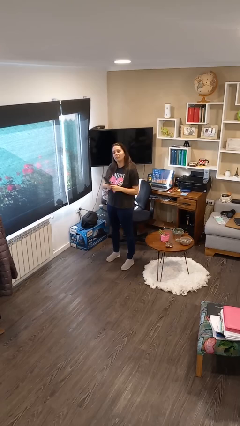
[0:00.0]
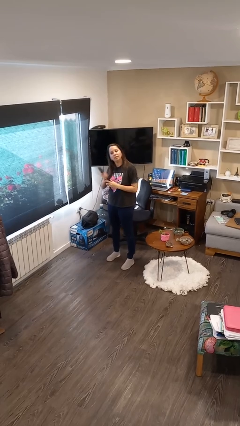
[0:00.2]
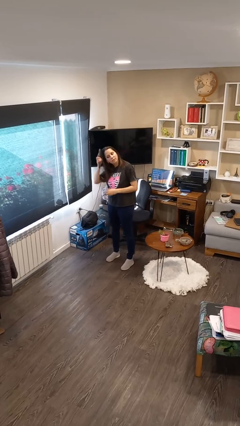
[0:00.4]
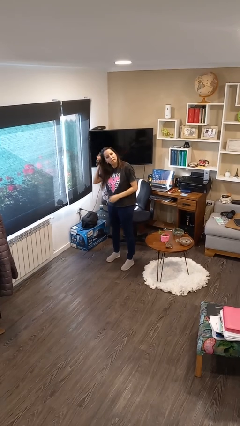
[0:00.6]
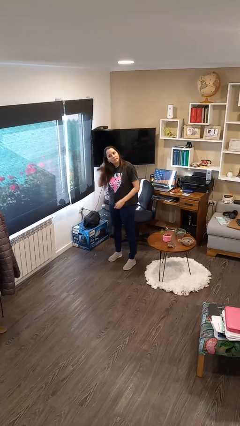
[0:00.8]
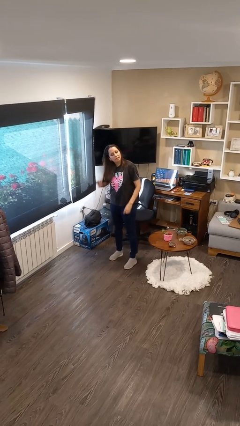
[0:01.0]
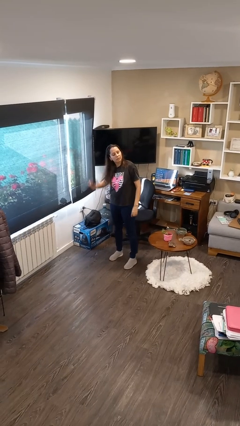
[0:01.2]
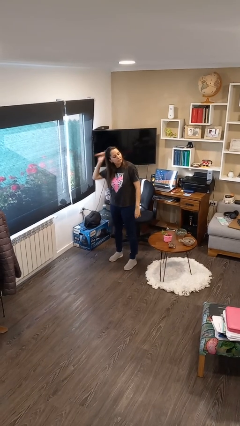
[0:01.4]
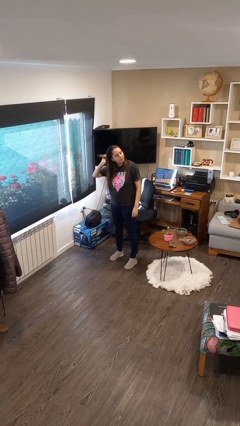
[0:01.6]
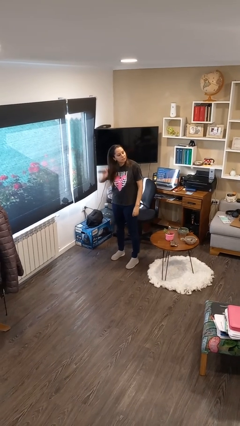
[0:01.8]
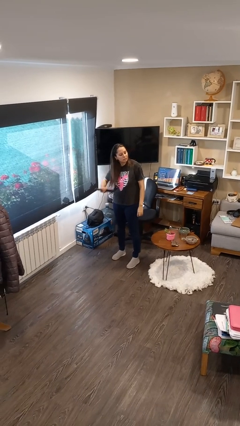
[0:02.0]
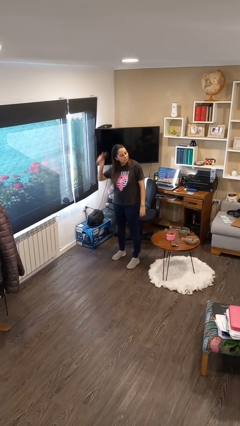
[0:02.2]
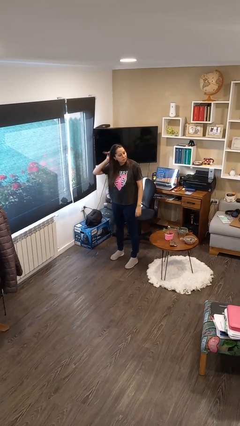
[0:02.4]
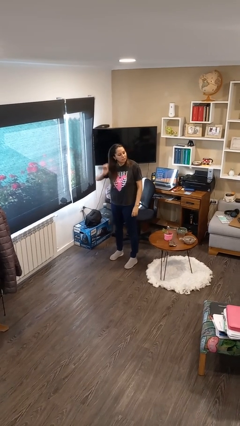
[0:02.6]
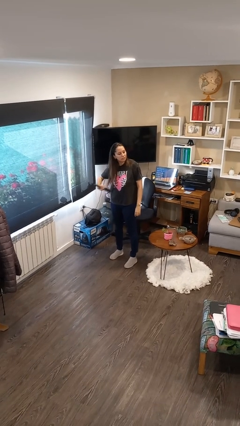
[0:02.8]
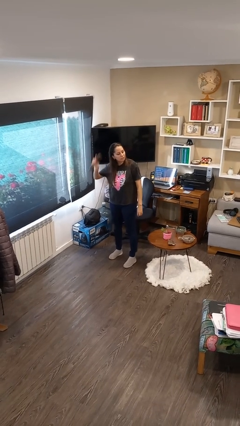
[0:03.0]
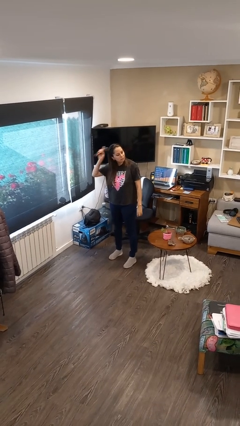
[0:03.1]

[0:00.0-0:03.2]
person brushes hair

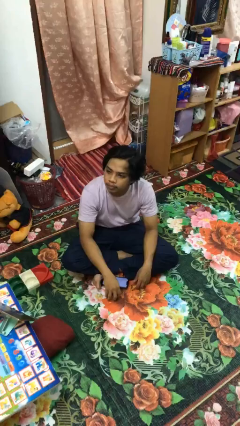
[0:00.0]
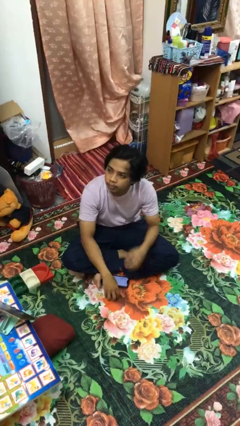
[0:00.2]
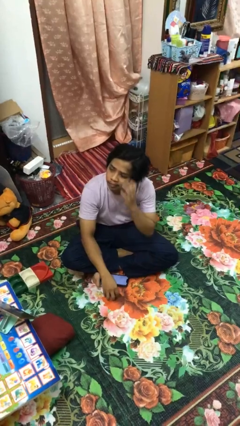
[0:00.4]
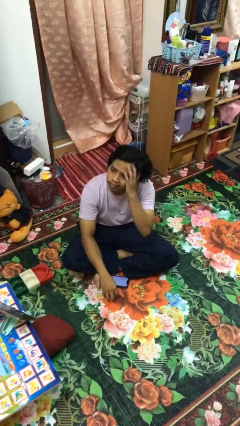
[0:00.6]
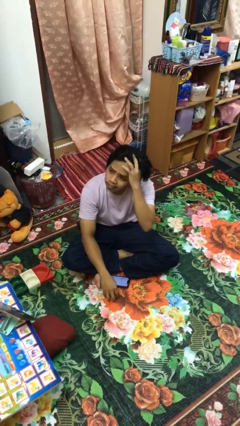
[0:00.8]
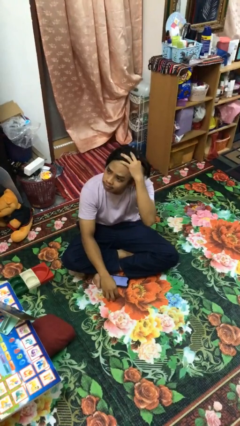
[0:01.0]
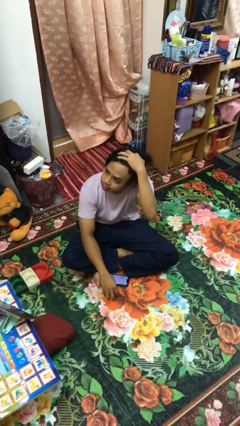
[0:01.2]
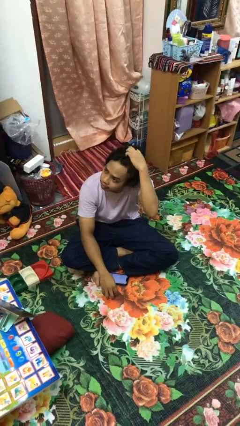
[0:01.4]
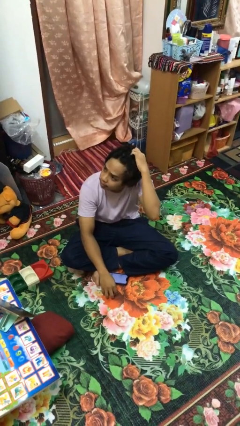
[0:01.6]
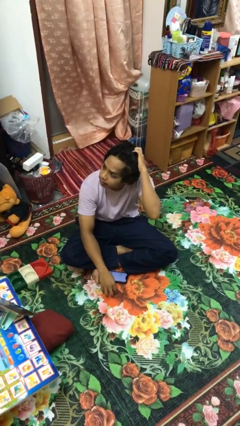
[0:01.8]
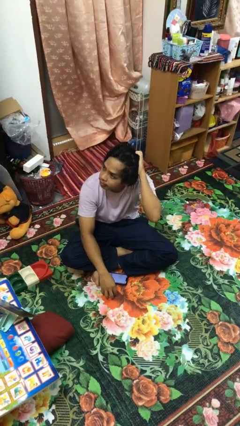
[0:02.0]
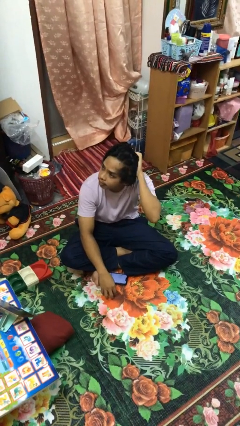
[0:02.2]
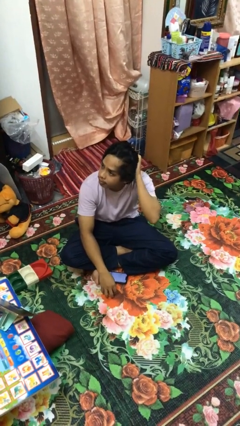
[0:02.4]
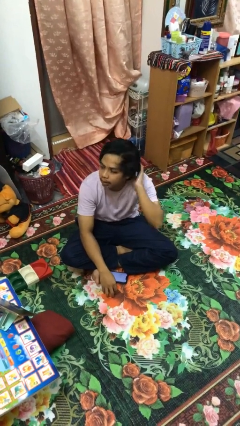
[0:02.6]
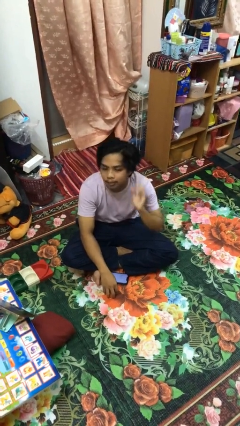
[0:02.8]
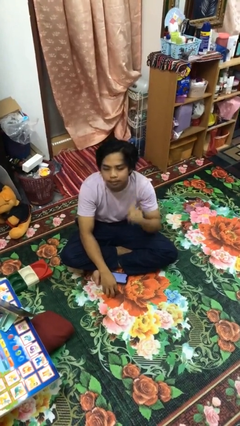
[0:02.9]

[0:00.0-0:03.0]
person strokes hair

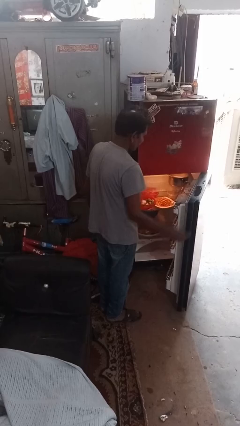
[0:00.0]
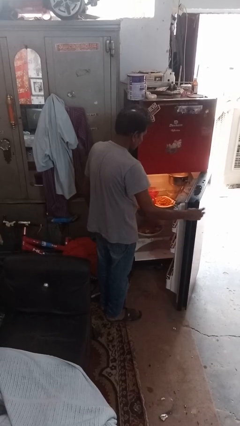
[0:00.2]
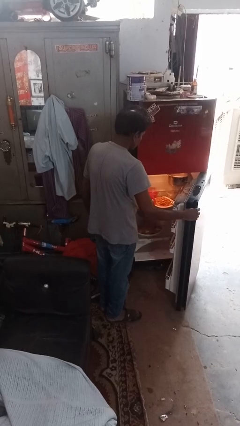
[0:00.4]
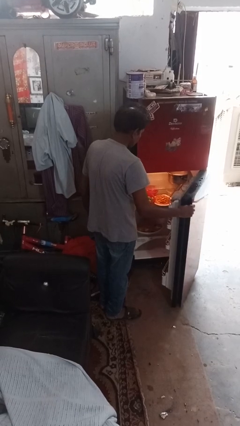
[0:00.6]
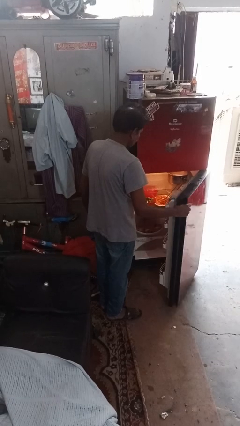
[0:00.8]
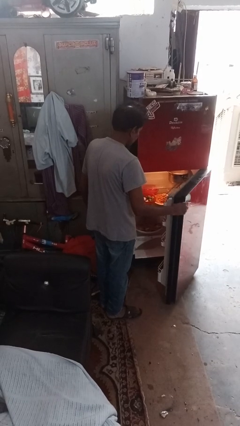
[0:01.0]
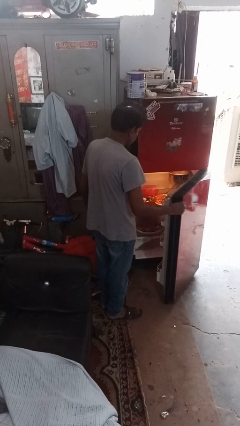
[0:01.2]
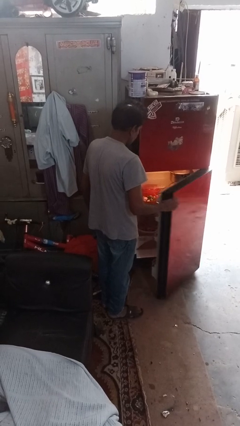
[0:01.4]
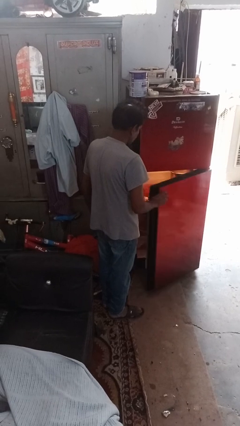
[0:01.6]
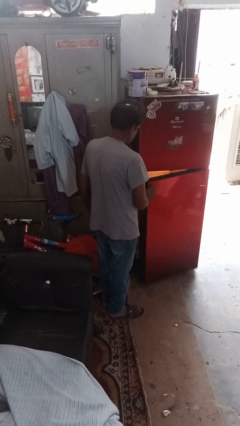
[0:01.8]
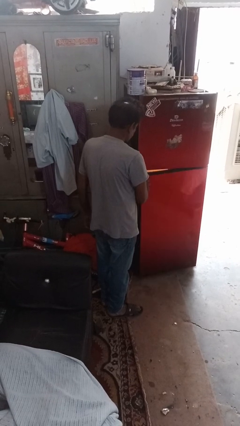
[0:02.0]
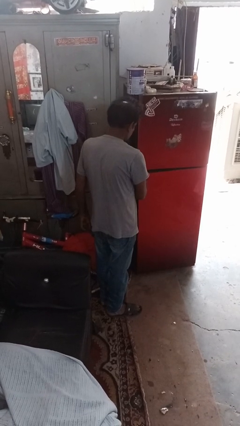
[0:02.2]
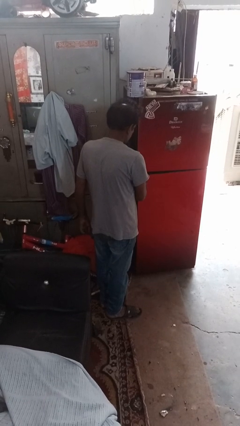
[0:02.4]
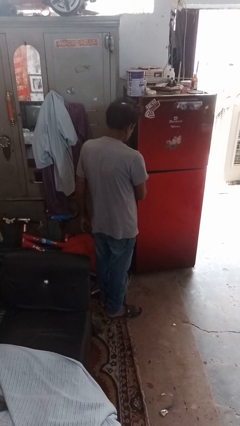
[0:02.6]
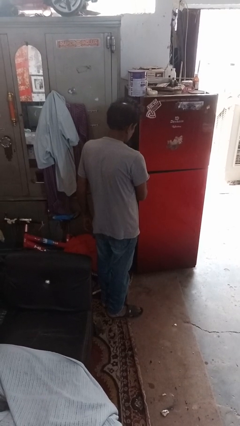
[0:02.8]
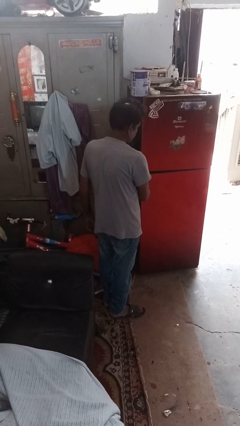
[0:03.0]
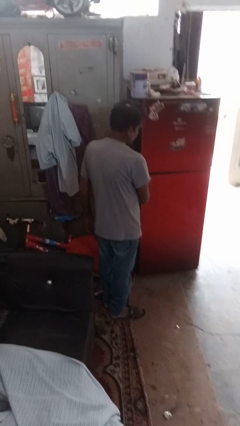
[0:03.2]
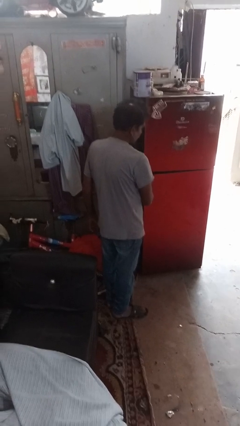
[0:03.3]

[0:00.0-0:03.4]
person closes refrigerator

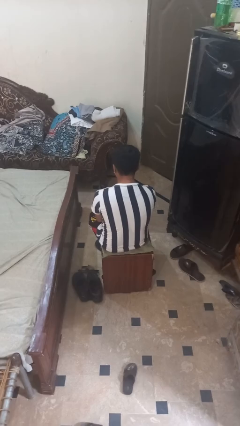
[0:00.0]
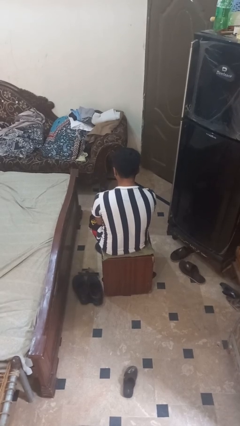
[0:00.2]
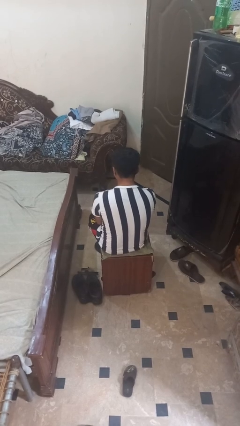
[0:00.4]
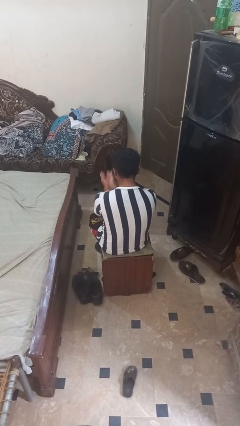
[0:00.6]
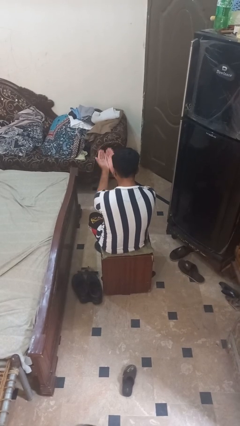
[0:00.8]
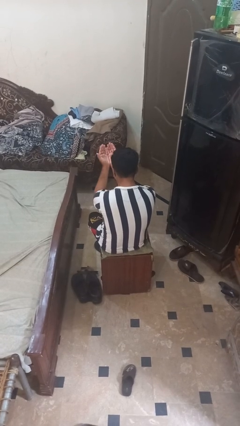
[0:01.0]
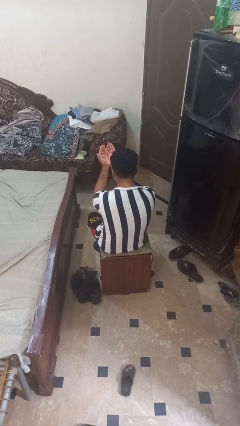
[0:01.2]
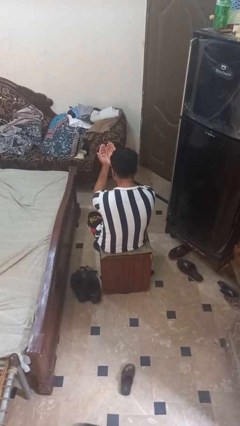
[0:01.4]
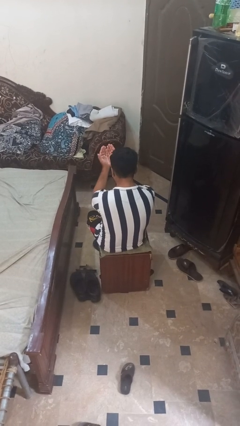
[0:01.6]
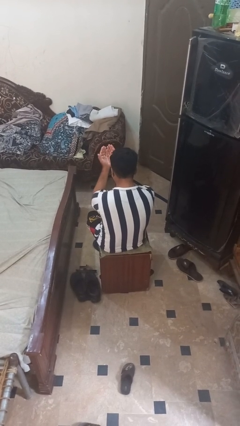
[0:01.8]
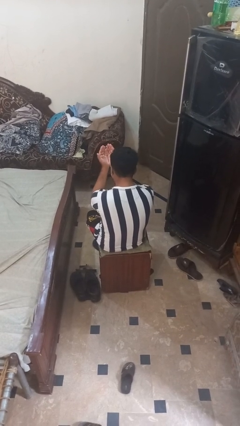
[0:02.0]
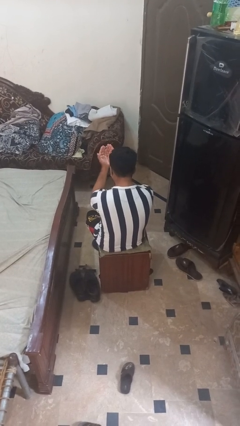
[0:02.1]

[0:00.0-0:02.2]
person prays

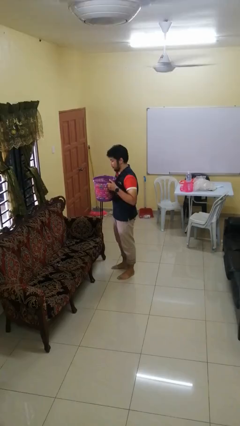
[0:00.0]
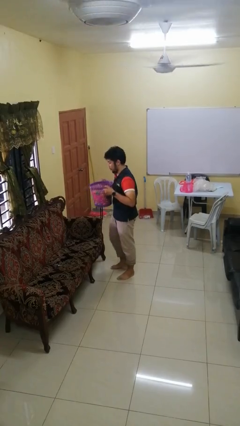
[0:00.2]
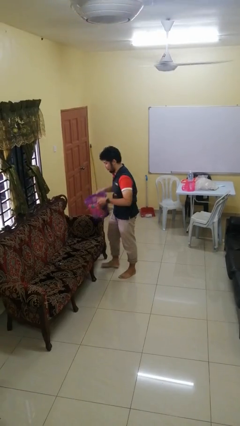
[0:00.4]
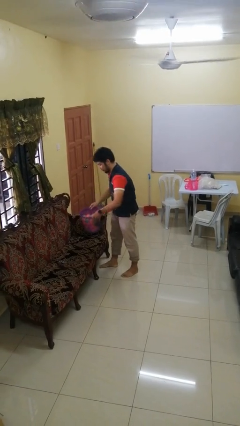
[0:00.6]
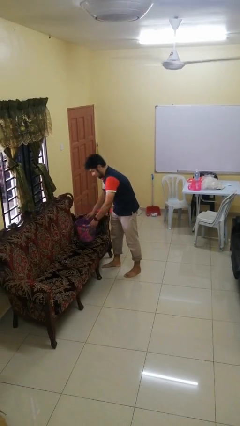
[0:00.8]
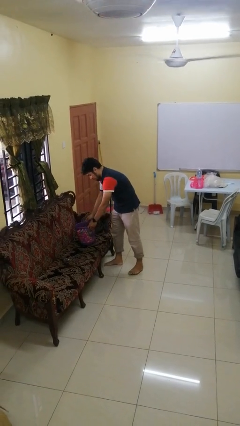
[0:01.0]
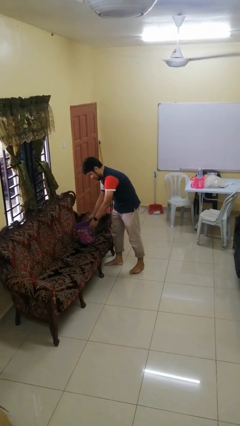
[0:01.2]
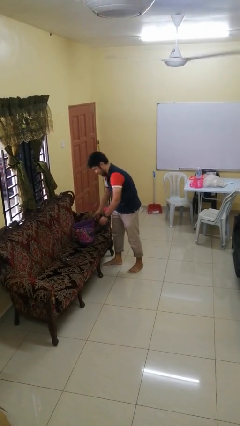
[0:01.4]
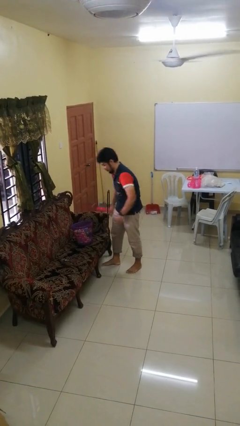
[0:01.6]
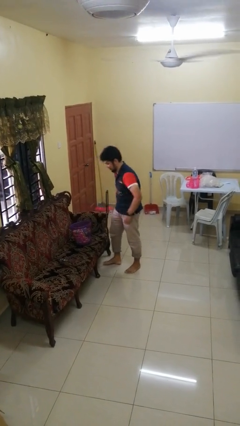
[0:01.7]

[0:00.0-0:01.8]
person puts down object on couch

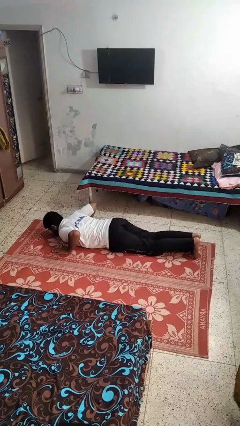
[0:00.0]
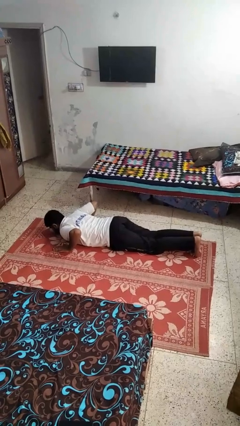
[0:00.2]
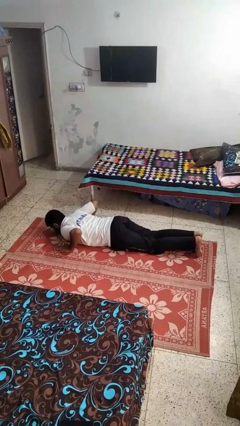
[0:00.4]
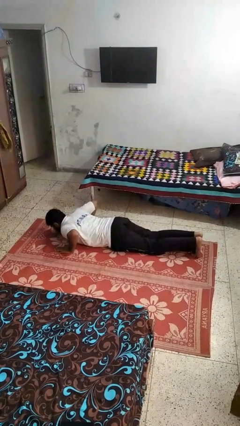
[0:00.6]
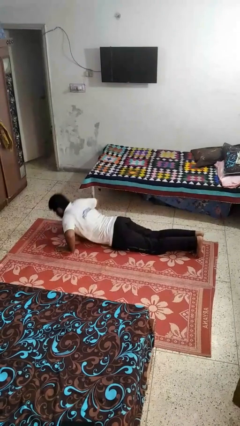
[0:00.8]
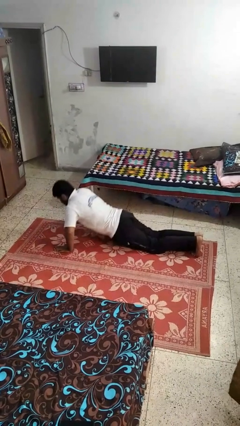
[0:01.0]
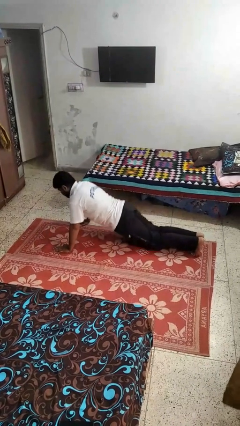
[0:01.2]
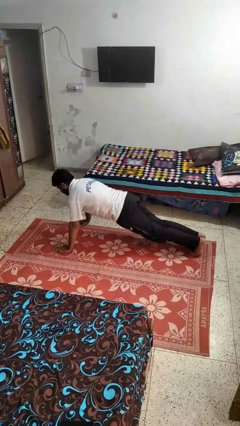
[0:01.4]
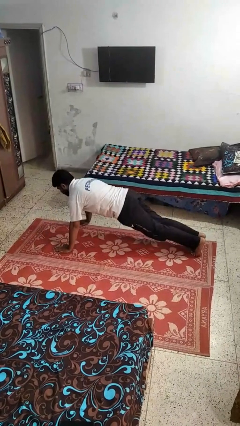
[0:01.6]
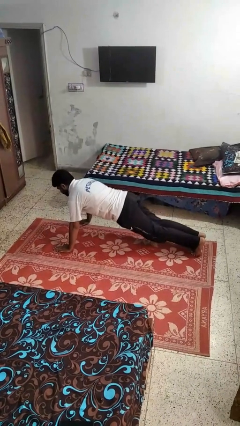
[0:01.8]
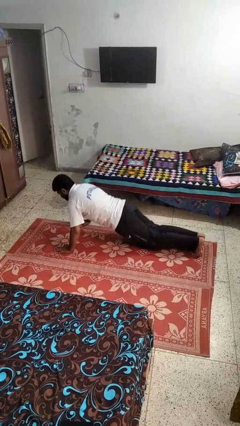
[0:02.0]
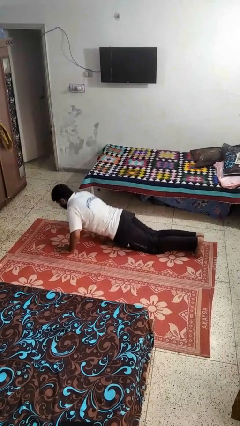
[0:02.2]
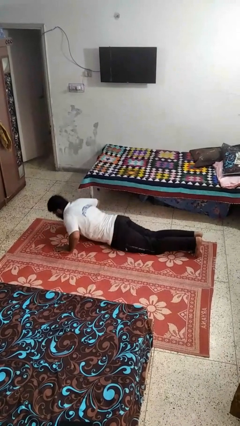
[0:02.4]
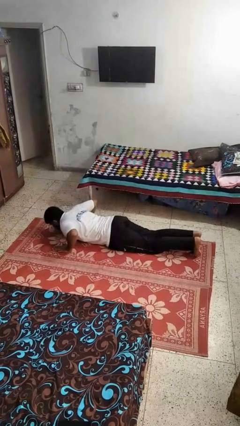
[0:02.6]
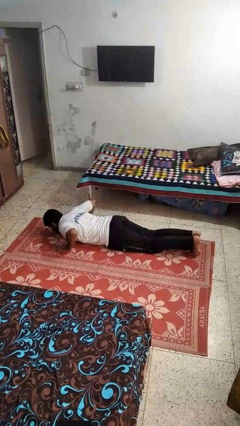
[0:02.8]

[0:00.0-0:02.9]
person exercises with pushup

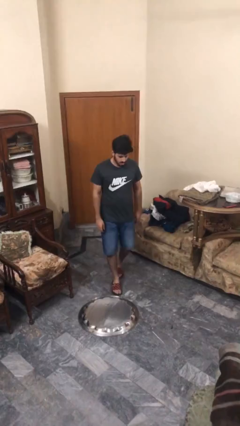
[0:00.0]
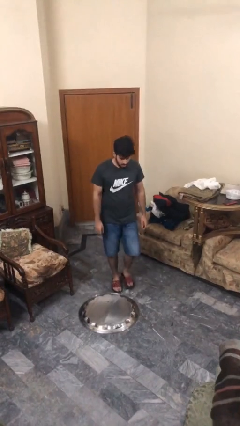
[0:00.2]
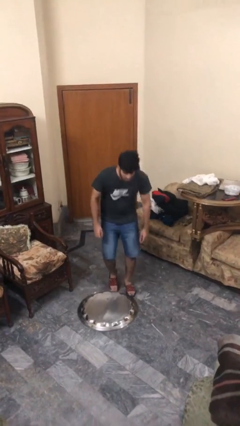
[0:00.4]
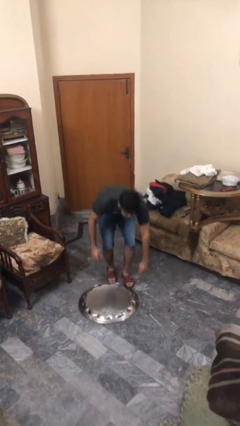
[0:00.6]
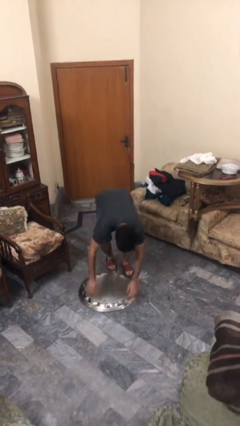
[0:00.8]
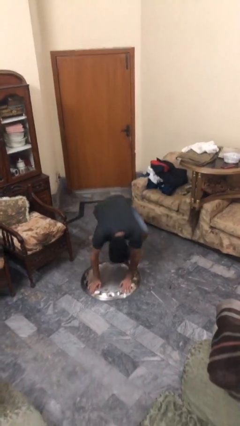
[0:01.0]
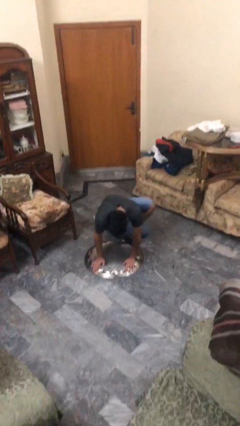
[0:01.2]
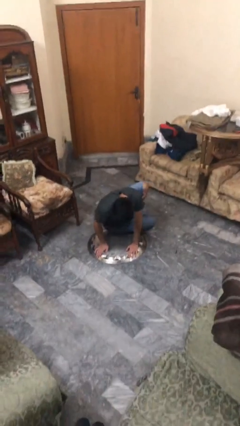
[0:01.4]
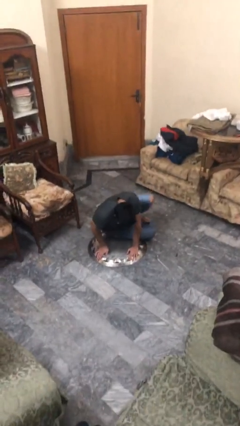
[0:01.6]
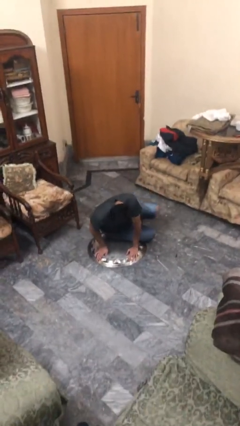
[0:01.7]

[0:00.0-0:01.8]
person trips on object on floor
